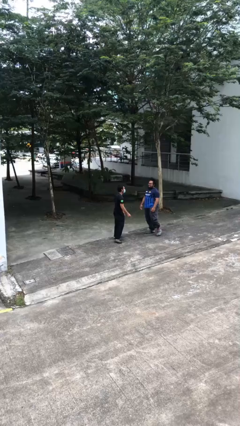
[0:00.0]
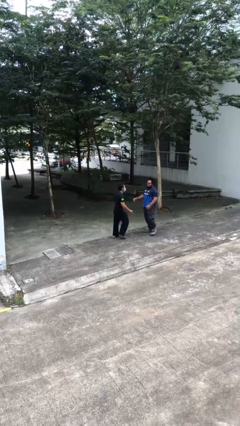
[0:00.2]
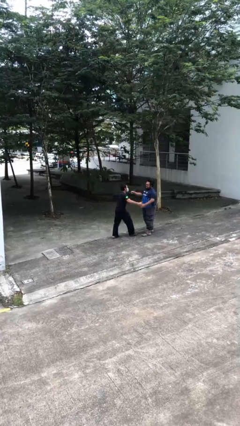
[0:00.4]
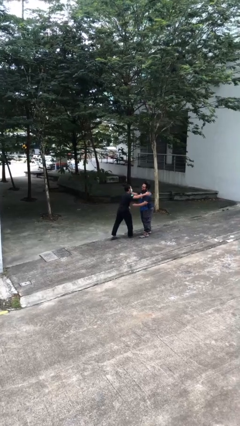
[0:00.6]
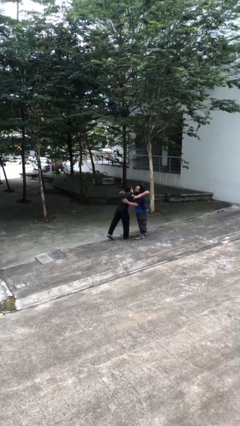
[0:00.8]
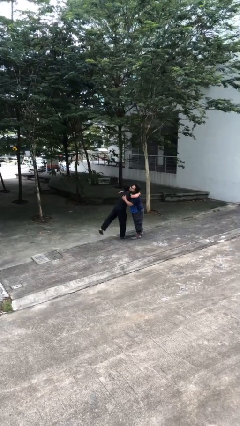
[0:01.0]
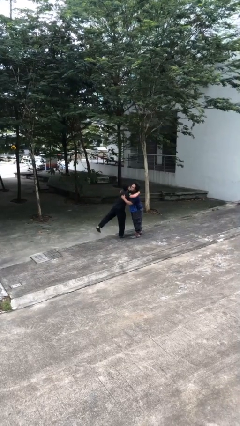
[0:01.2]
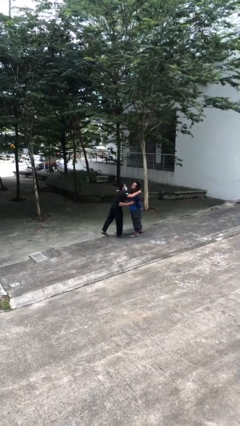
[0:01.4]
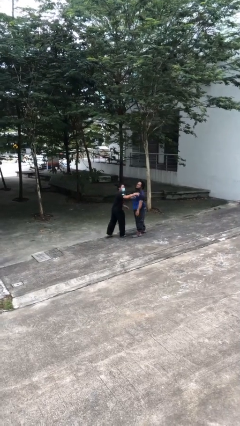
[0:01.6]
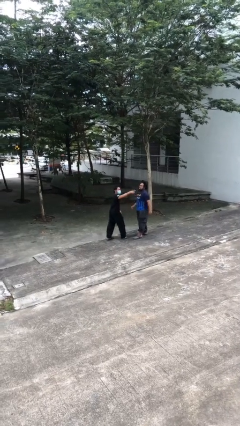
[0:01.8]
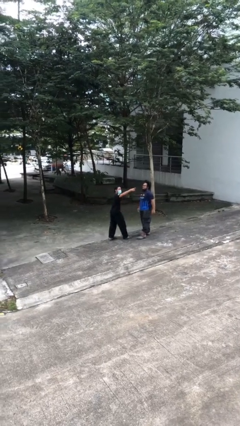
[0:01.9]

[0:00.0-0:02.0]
person embraces person

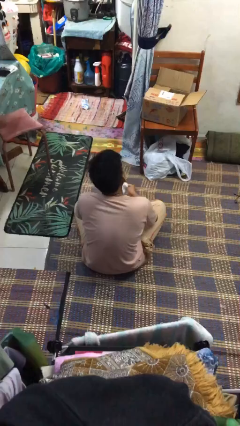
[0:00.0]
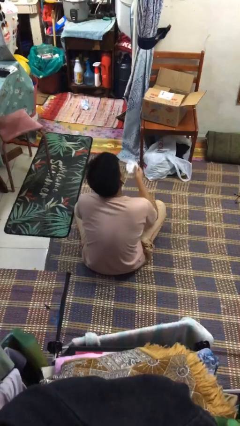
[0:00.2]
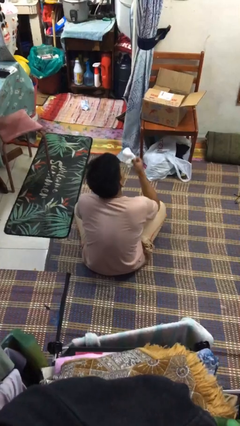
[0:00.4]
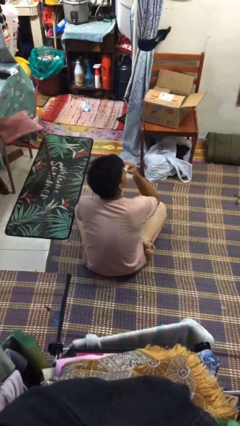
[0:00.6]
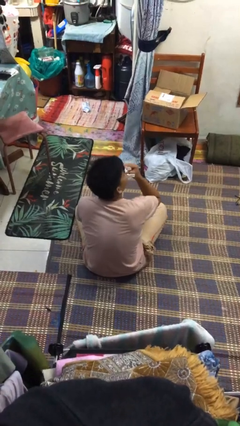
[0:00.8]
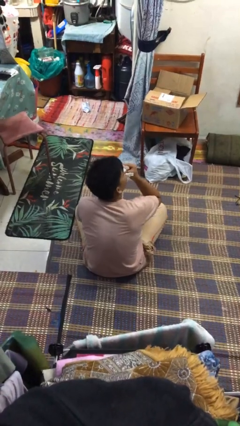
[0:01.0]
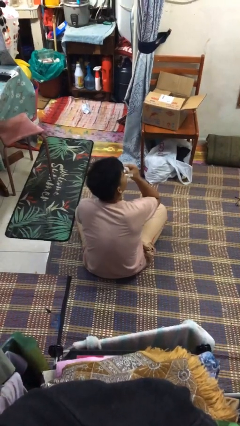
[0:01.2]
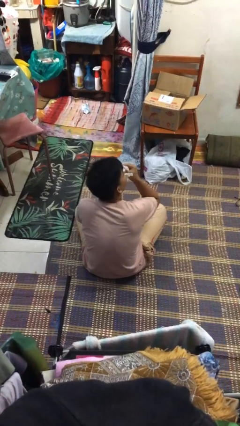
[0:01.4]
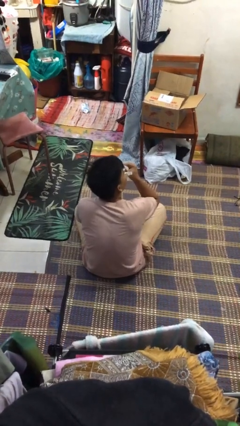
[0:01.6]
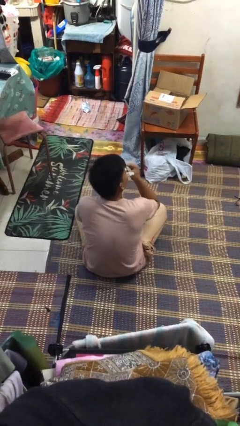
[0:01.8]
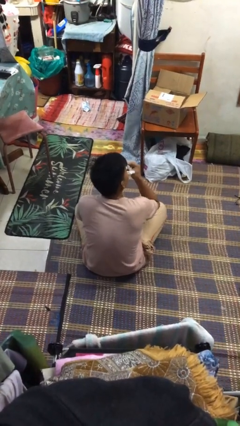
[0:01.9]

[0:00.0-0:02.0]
person blows nose

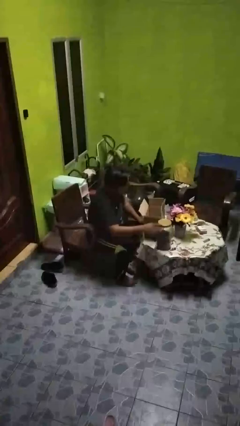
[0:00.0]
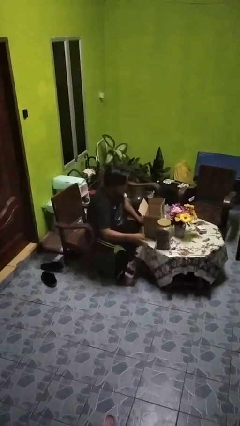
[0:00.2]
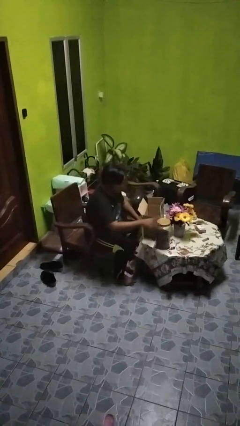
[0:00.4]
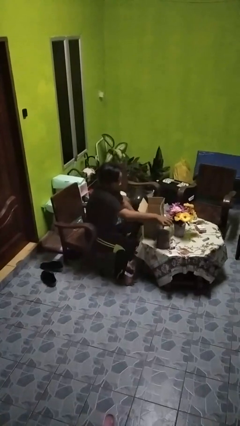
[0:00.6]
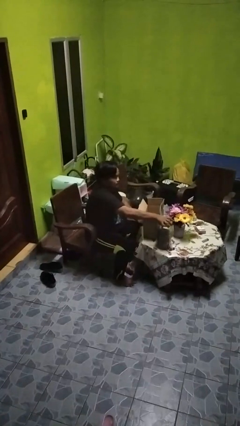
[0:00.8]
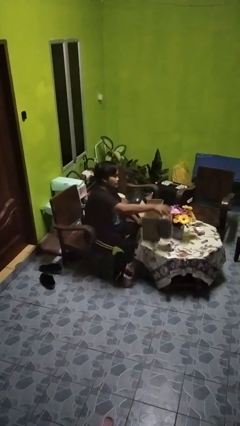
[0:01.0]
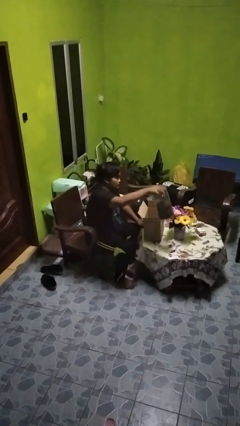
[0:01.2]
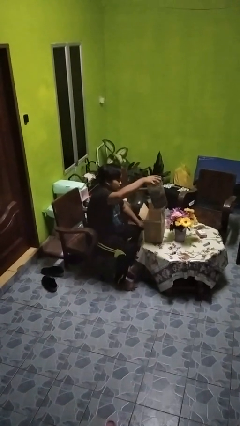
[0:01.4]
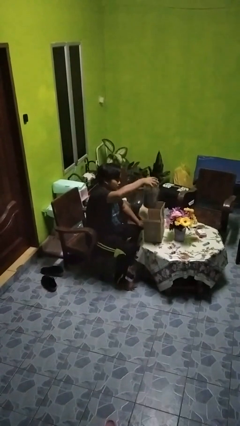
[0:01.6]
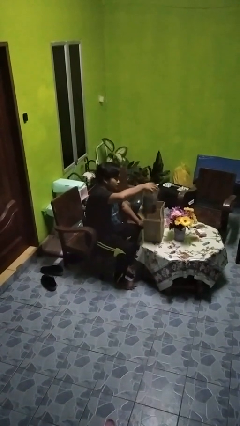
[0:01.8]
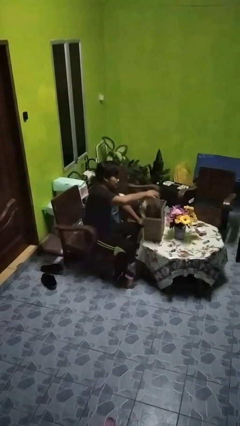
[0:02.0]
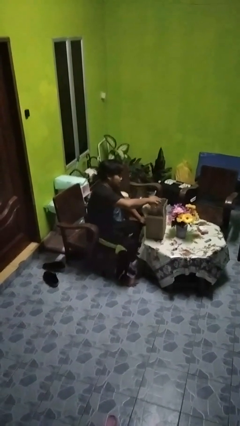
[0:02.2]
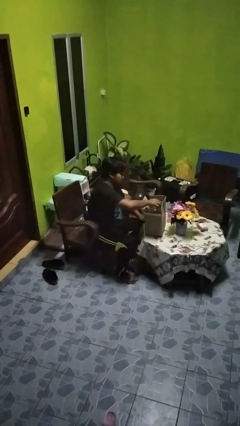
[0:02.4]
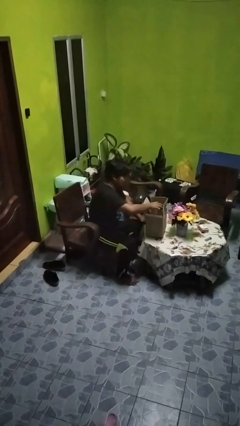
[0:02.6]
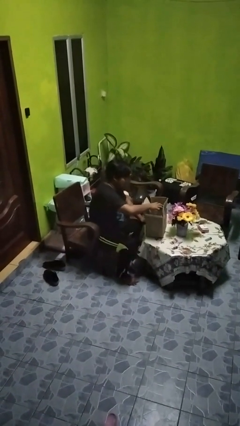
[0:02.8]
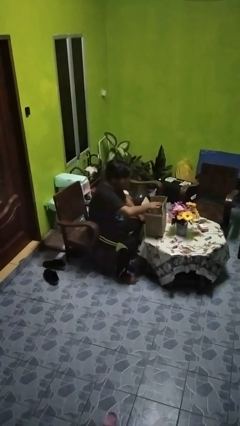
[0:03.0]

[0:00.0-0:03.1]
person puts object into box

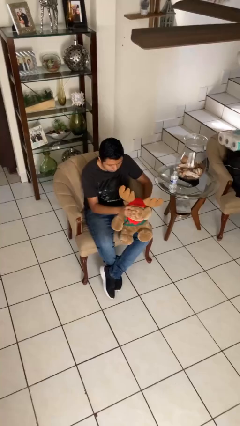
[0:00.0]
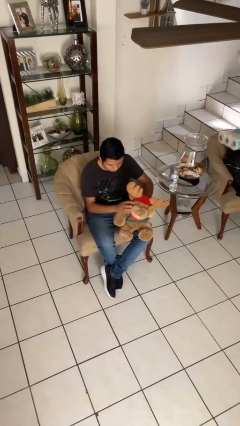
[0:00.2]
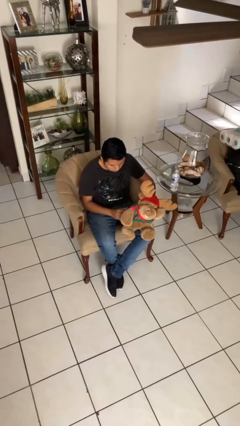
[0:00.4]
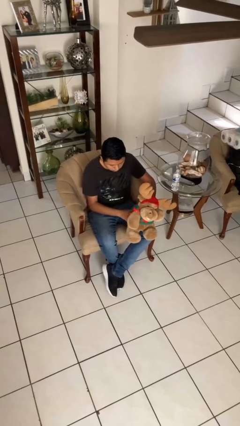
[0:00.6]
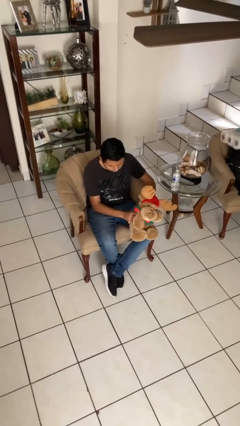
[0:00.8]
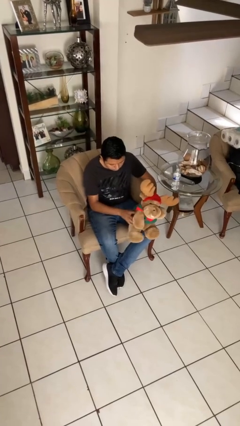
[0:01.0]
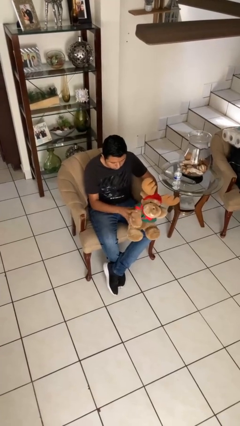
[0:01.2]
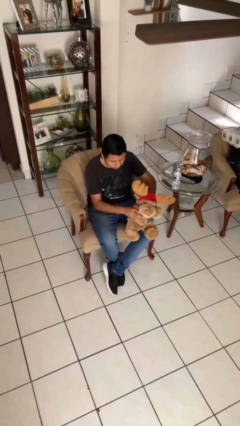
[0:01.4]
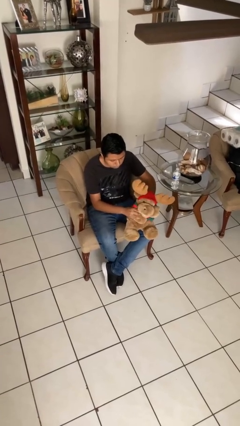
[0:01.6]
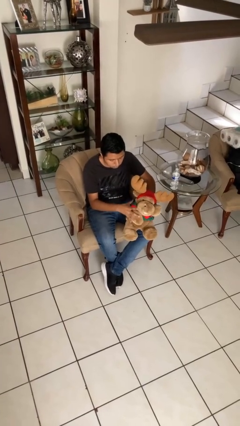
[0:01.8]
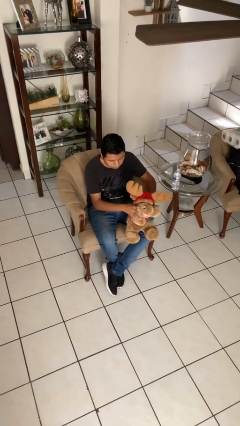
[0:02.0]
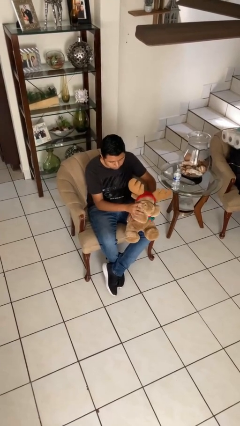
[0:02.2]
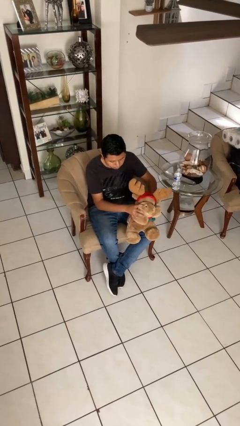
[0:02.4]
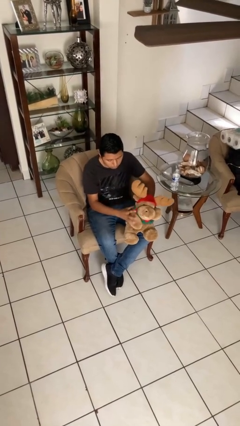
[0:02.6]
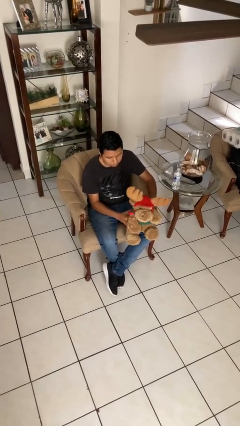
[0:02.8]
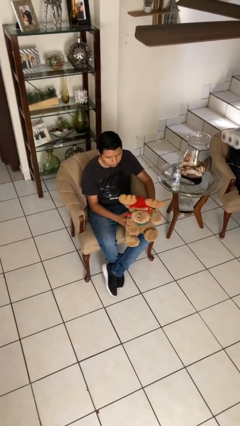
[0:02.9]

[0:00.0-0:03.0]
person squeezes object

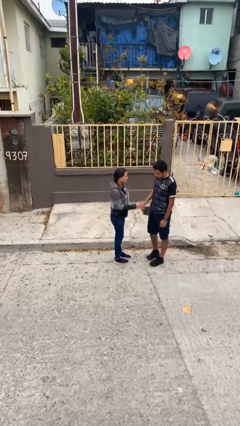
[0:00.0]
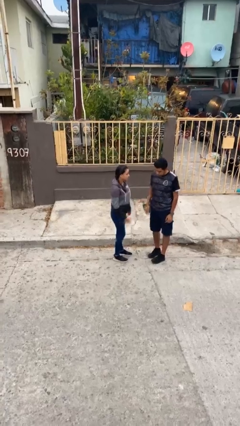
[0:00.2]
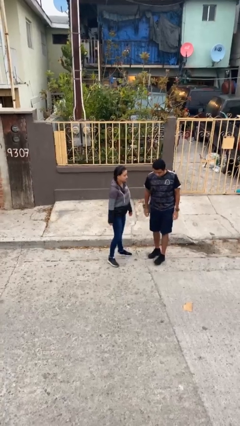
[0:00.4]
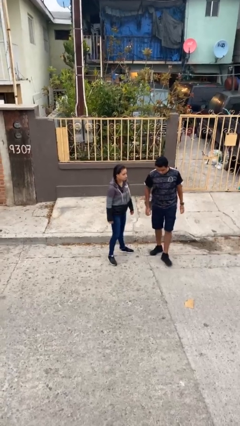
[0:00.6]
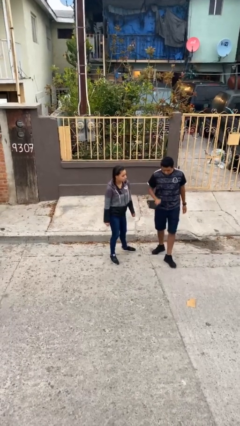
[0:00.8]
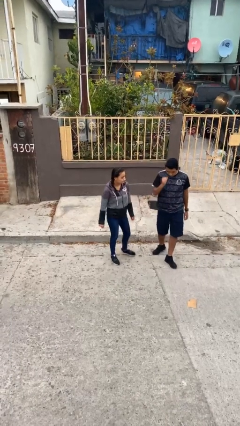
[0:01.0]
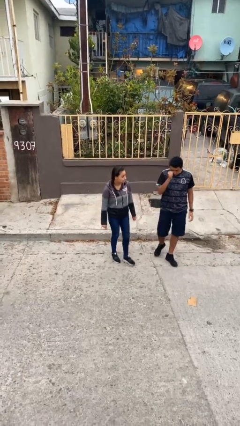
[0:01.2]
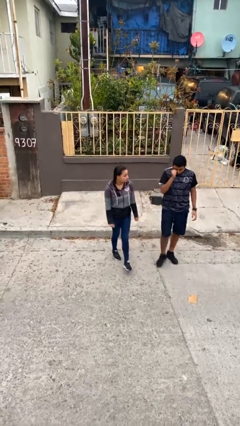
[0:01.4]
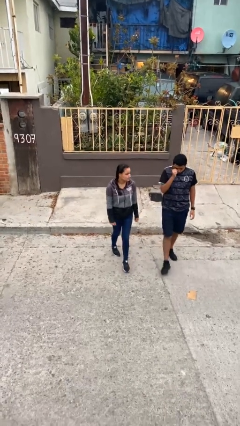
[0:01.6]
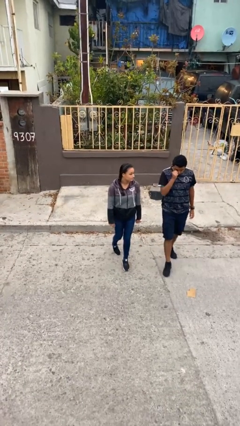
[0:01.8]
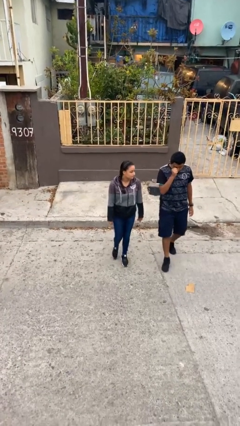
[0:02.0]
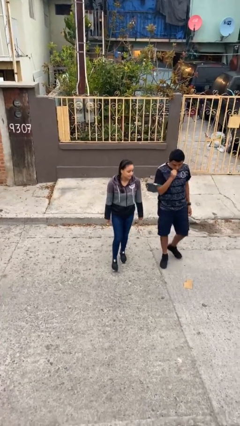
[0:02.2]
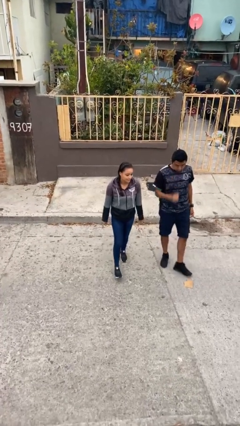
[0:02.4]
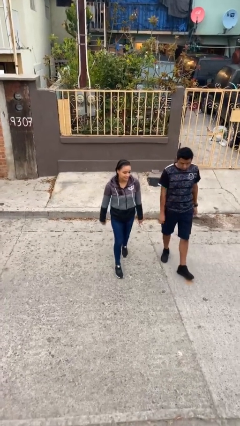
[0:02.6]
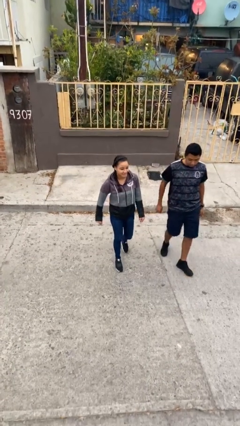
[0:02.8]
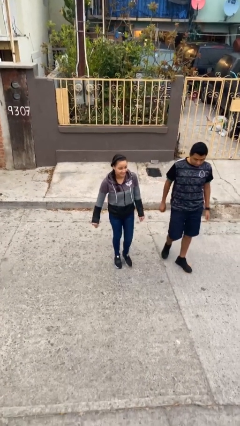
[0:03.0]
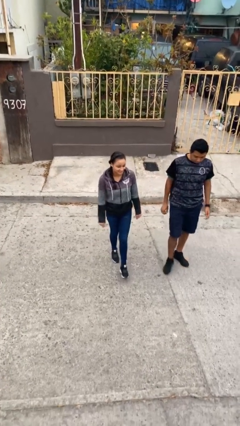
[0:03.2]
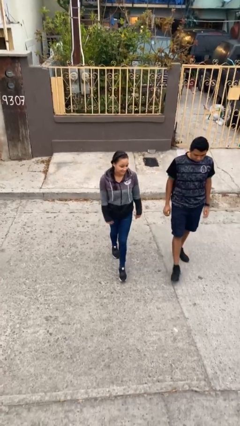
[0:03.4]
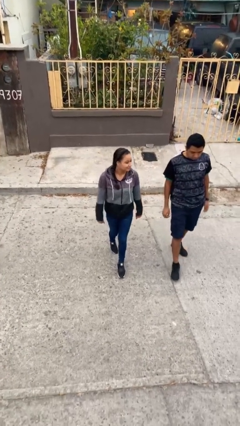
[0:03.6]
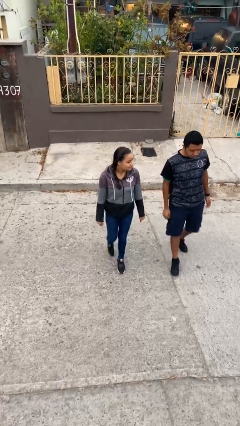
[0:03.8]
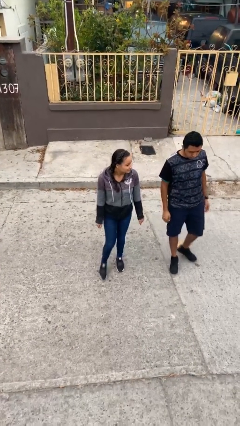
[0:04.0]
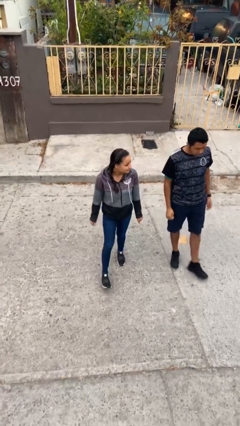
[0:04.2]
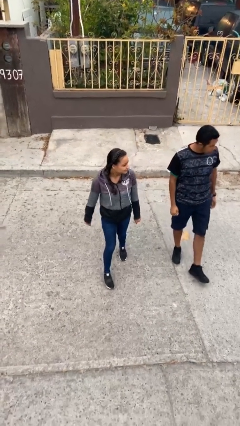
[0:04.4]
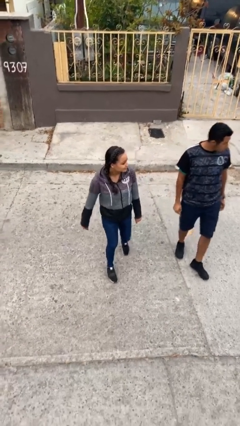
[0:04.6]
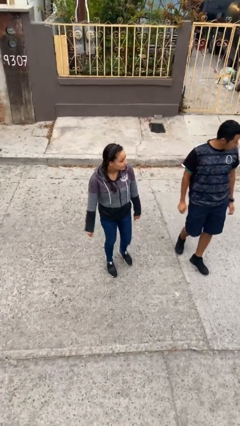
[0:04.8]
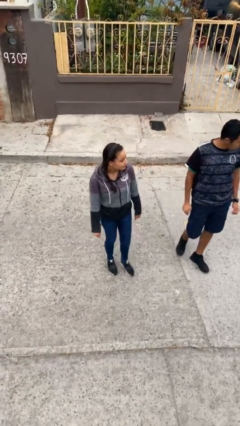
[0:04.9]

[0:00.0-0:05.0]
person talks to person

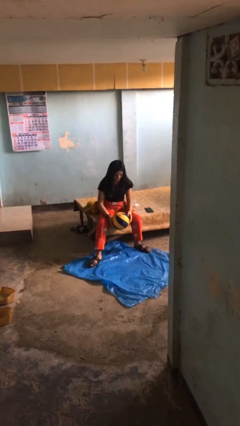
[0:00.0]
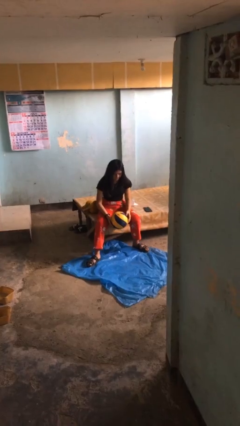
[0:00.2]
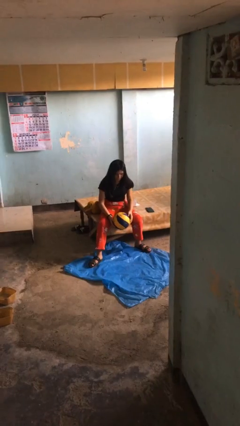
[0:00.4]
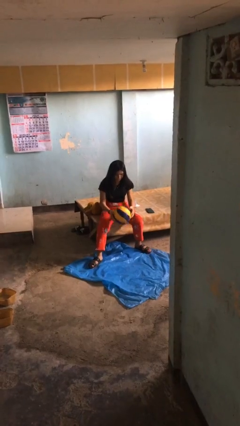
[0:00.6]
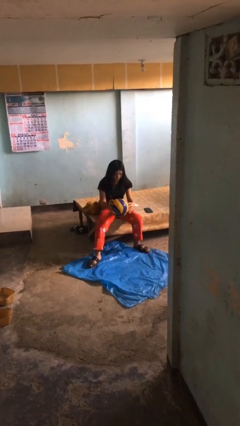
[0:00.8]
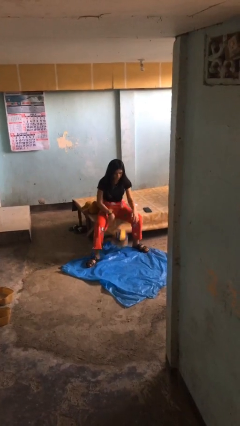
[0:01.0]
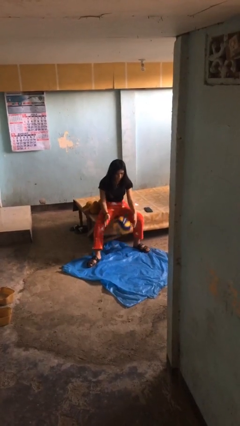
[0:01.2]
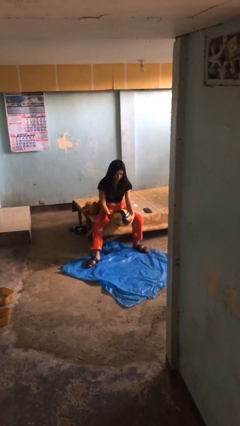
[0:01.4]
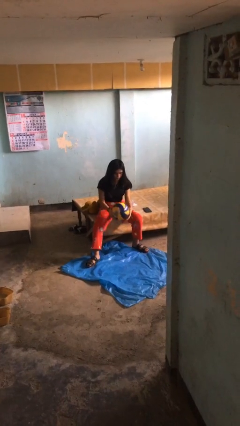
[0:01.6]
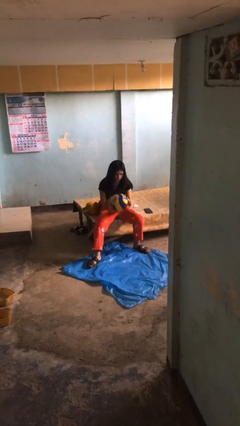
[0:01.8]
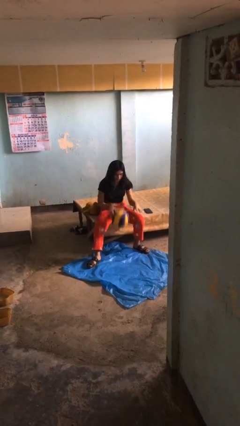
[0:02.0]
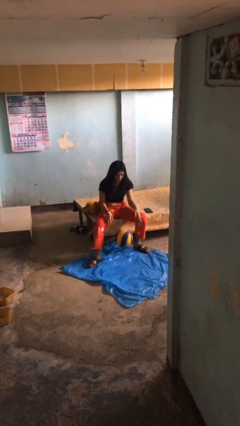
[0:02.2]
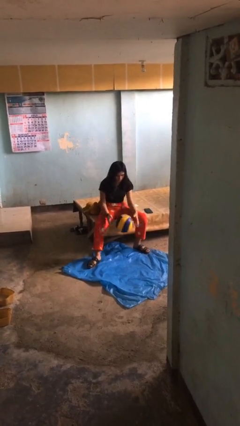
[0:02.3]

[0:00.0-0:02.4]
person bounces ball on floor

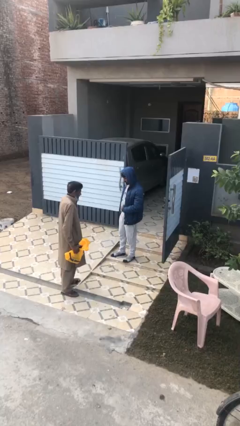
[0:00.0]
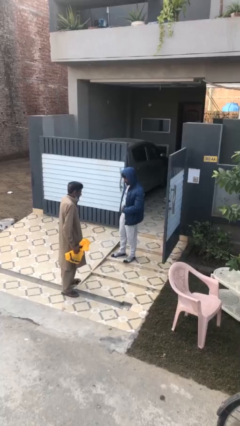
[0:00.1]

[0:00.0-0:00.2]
person transfers object to person
